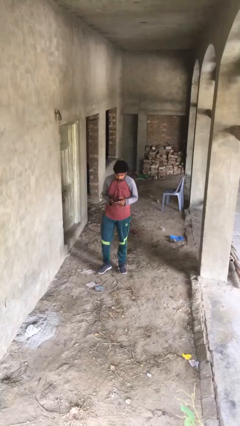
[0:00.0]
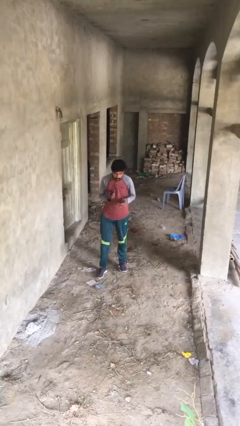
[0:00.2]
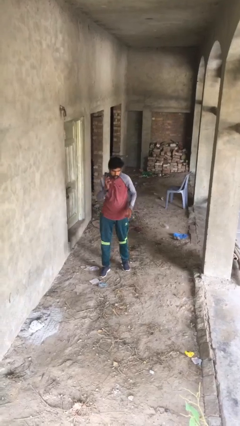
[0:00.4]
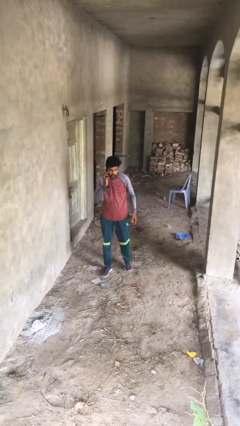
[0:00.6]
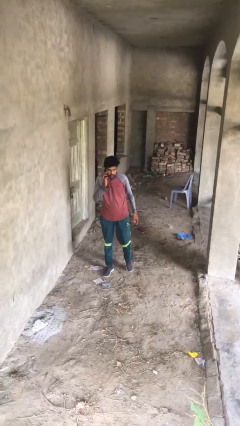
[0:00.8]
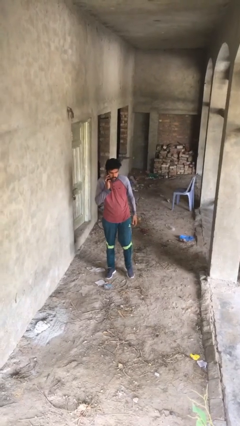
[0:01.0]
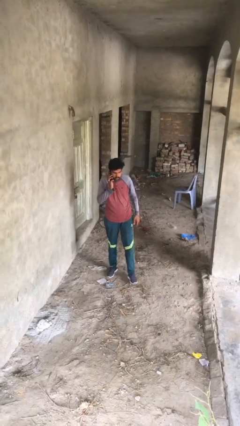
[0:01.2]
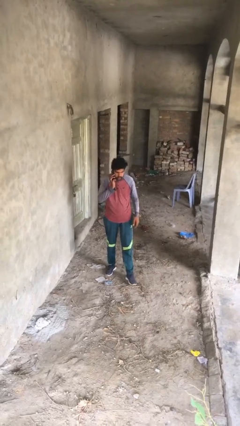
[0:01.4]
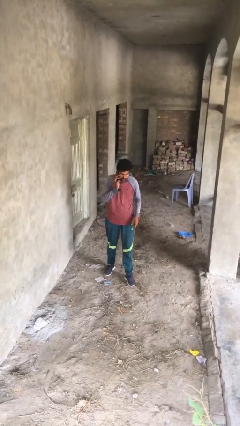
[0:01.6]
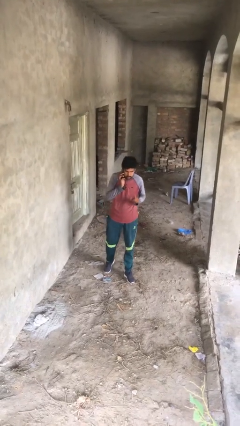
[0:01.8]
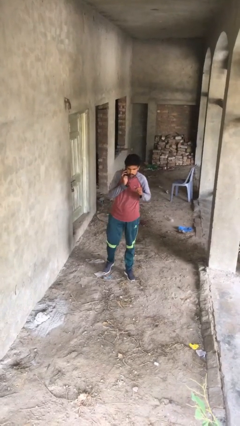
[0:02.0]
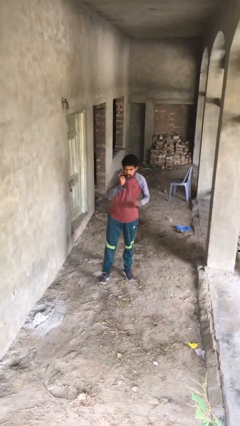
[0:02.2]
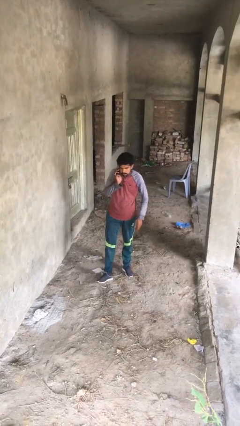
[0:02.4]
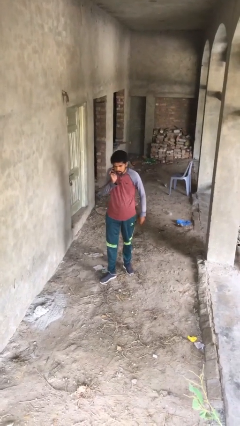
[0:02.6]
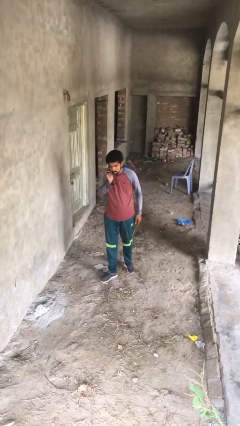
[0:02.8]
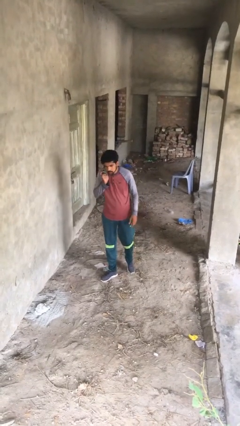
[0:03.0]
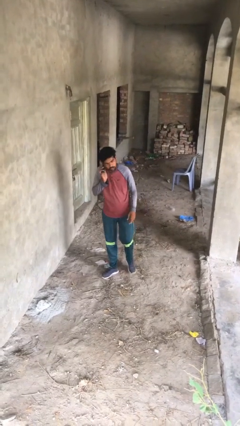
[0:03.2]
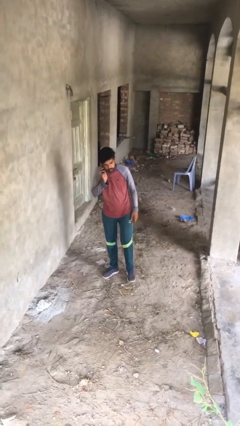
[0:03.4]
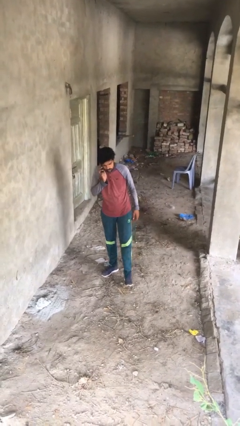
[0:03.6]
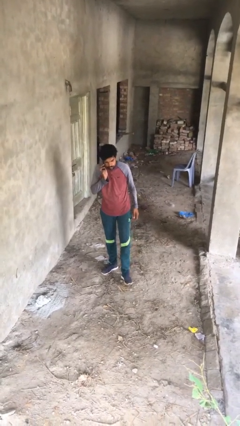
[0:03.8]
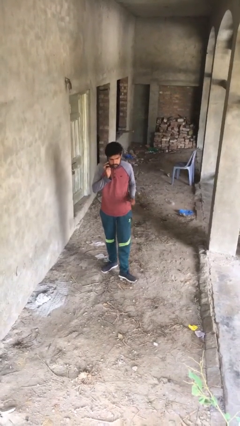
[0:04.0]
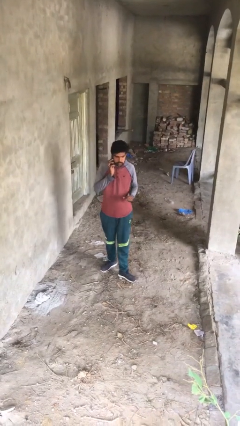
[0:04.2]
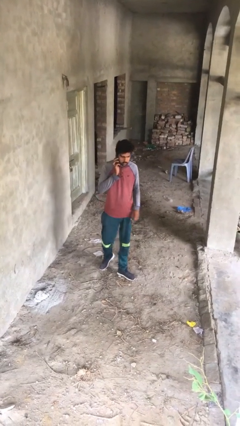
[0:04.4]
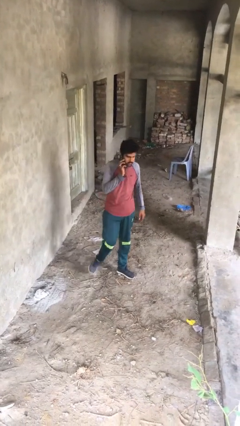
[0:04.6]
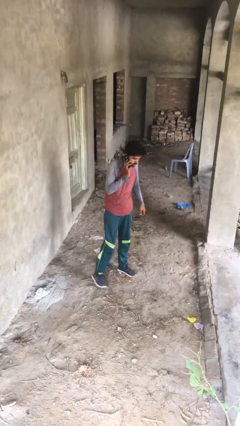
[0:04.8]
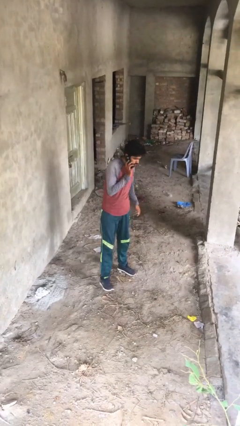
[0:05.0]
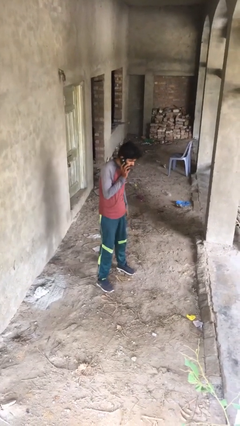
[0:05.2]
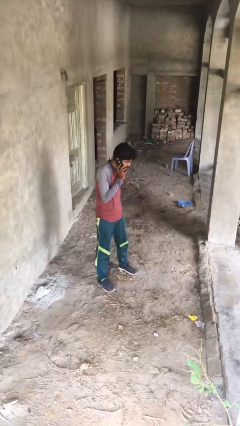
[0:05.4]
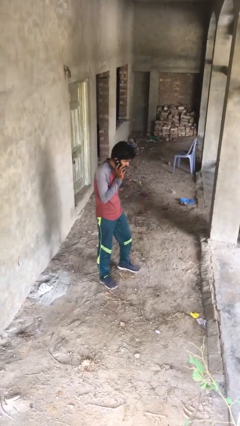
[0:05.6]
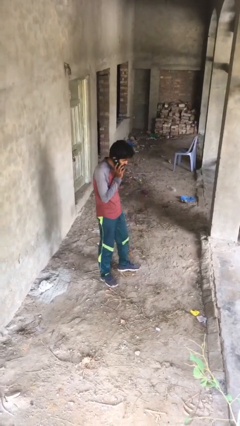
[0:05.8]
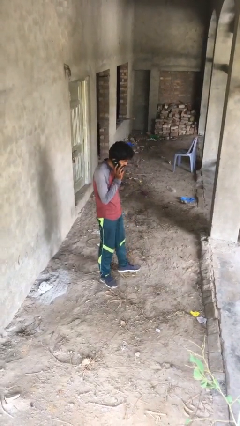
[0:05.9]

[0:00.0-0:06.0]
person talks on phone

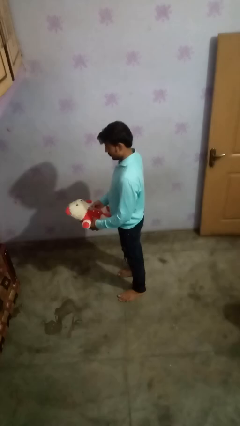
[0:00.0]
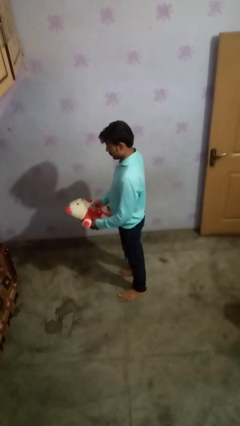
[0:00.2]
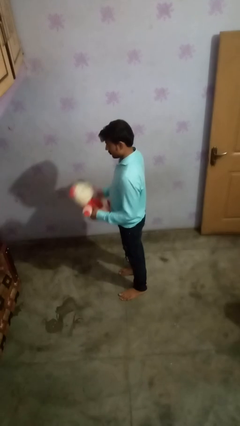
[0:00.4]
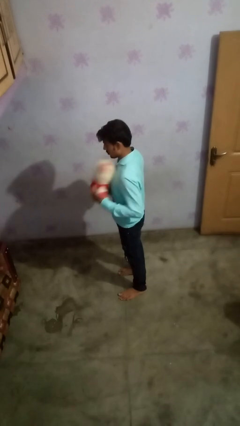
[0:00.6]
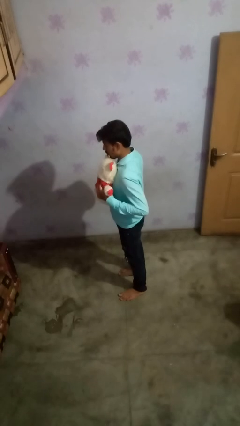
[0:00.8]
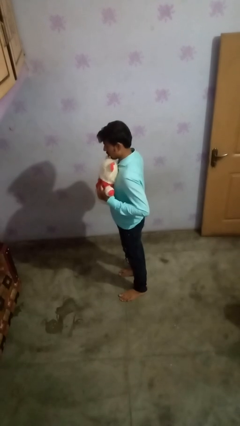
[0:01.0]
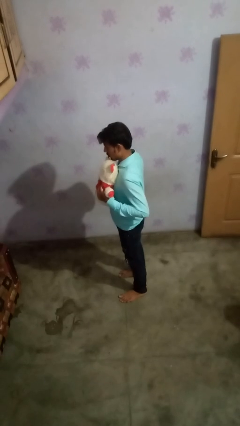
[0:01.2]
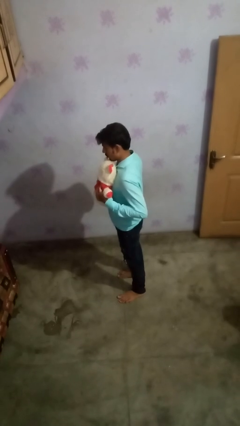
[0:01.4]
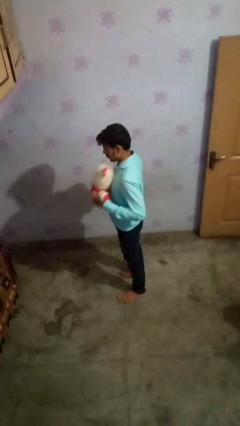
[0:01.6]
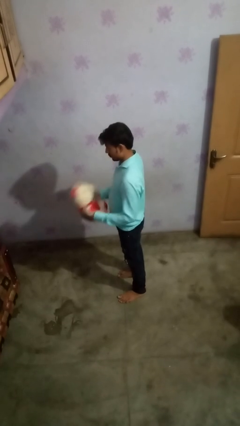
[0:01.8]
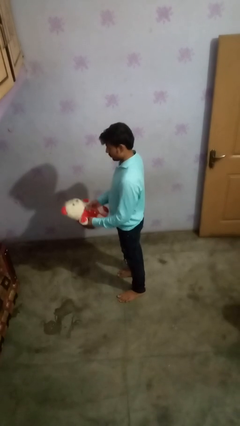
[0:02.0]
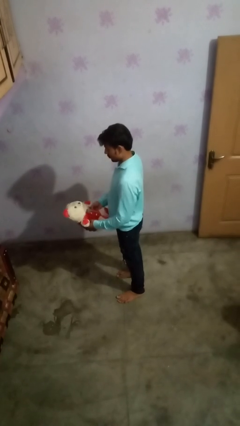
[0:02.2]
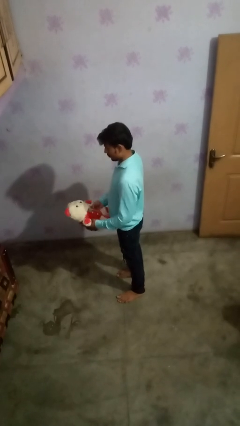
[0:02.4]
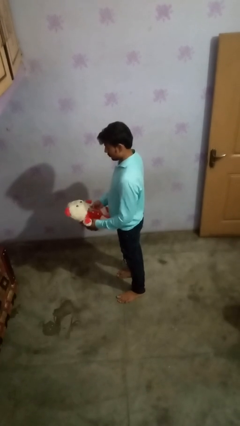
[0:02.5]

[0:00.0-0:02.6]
person hugs stuffed animal

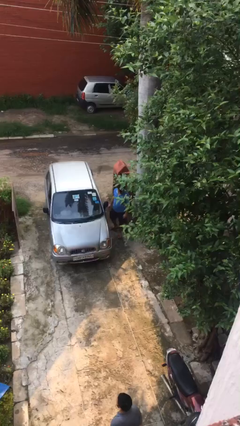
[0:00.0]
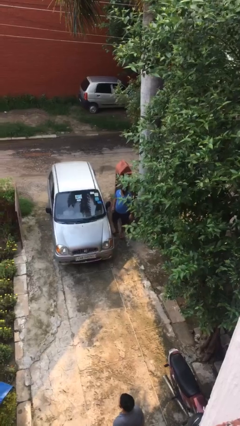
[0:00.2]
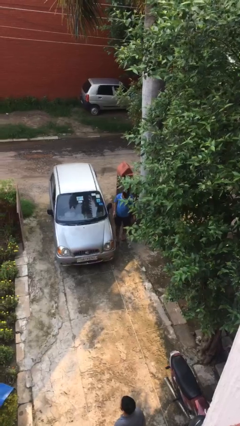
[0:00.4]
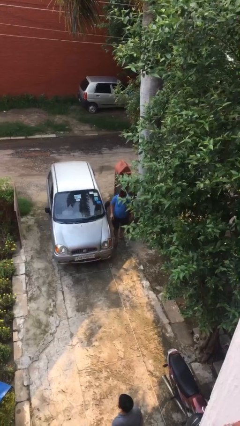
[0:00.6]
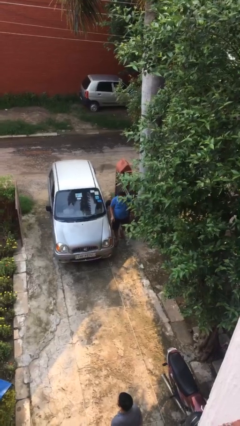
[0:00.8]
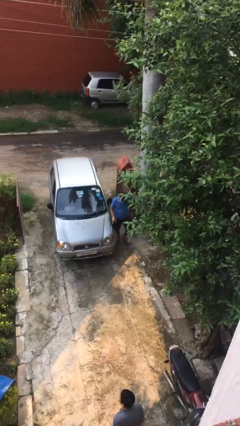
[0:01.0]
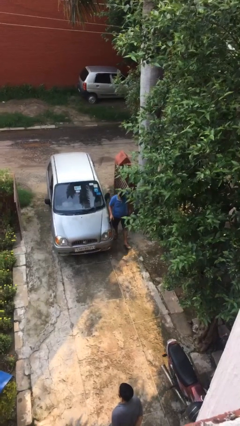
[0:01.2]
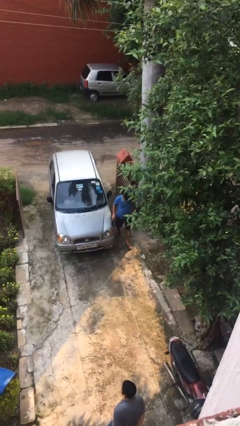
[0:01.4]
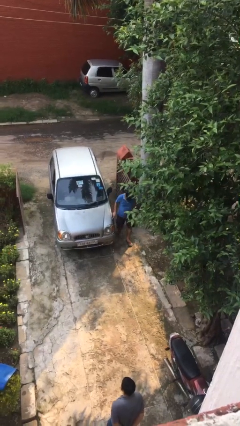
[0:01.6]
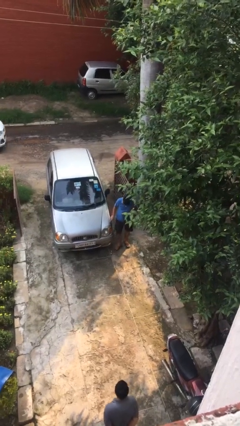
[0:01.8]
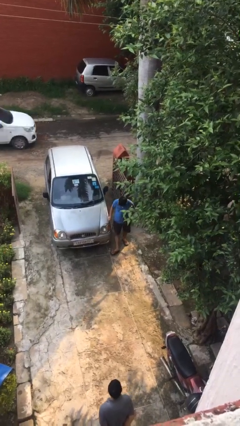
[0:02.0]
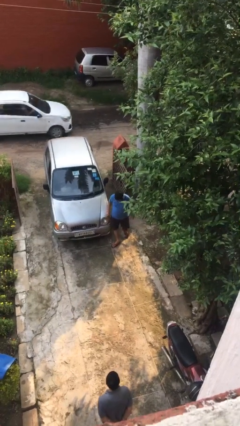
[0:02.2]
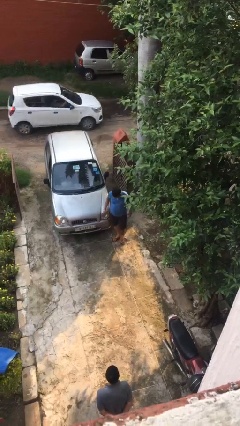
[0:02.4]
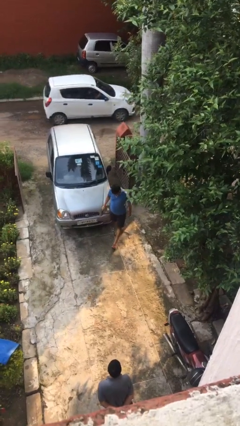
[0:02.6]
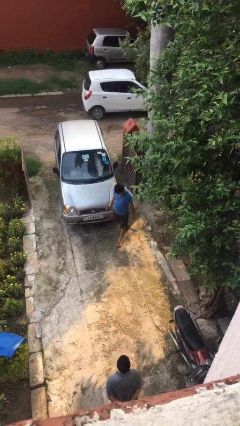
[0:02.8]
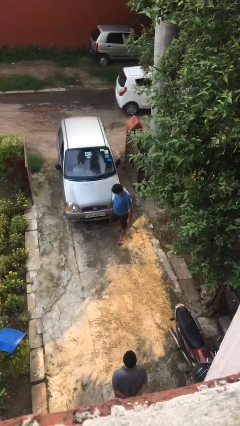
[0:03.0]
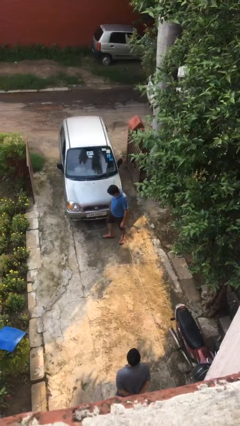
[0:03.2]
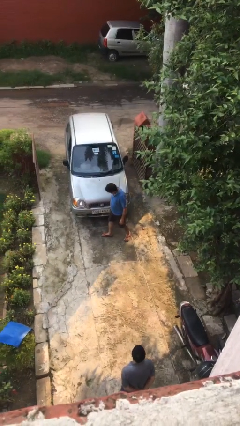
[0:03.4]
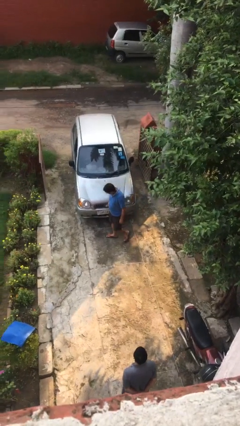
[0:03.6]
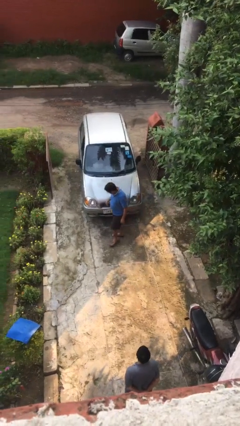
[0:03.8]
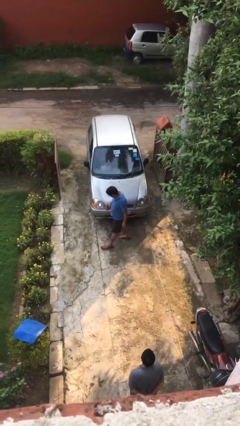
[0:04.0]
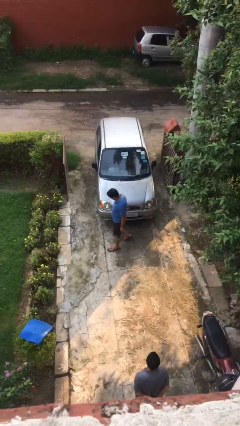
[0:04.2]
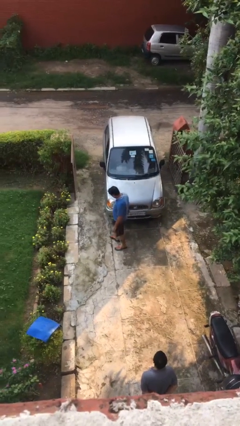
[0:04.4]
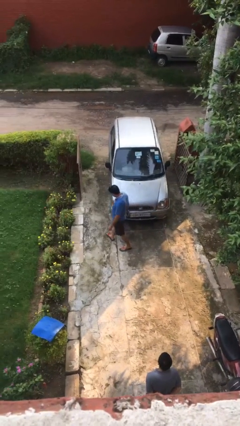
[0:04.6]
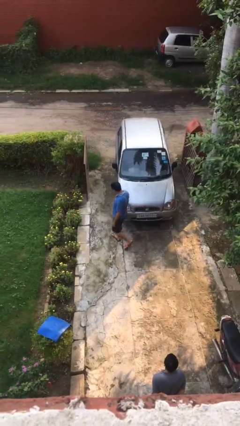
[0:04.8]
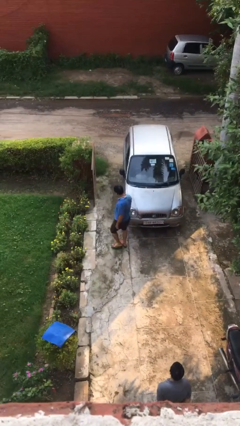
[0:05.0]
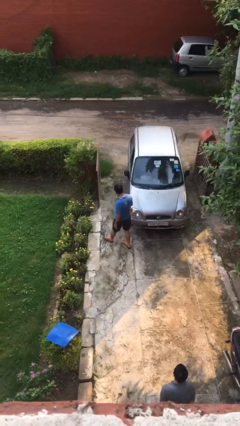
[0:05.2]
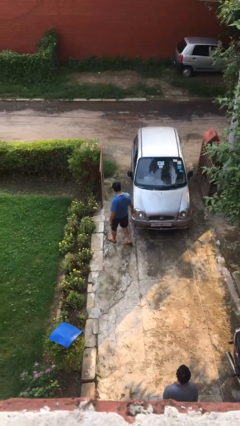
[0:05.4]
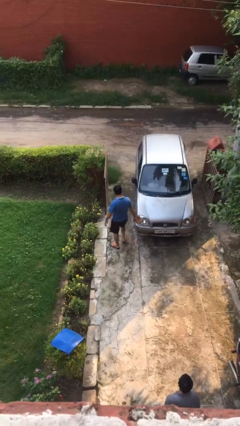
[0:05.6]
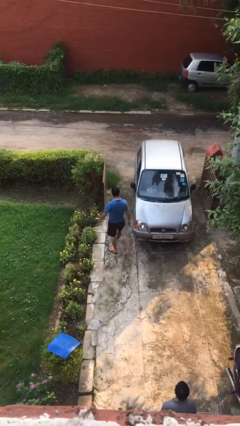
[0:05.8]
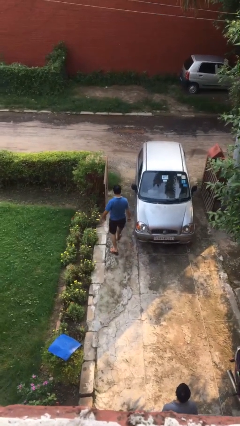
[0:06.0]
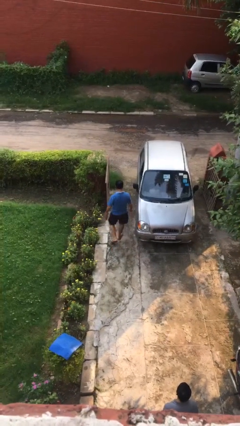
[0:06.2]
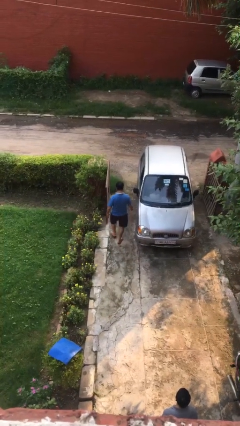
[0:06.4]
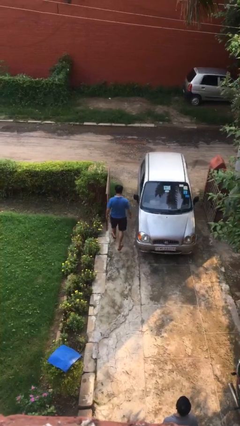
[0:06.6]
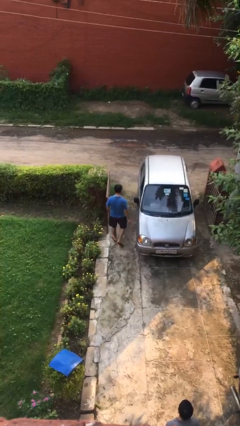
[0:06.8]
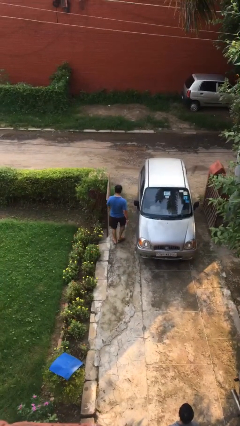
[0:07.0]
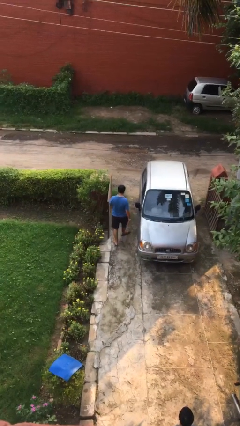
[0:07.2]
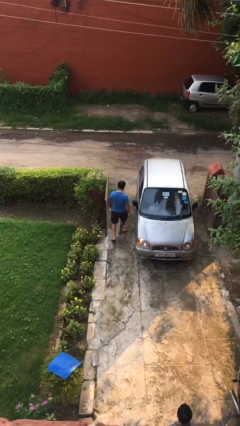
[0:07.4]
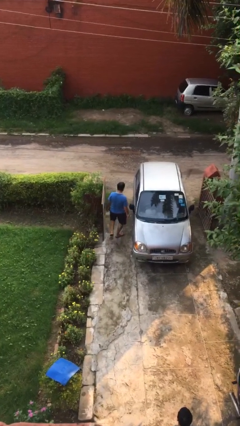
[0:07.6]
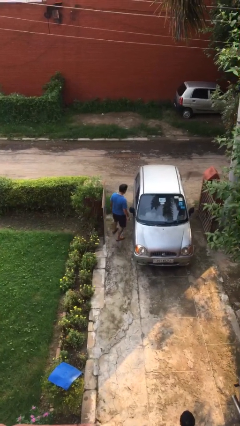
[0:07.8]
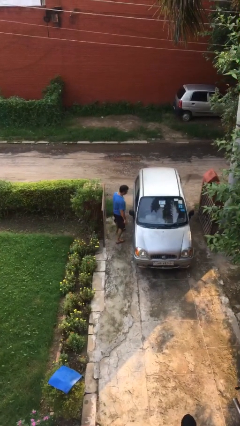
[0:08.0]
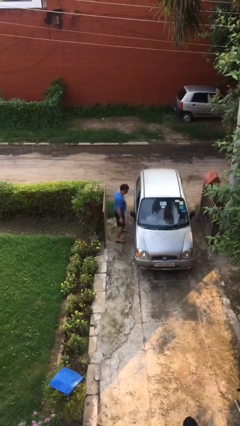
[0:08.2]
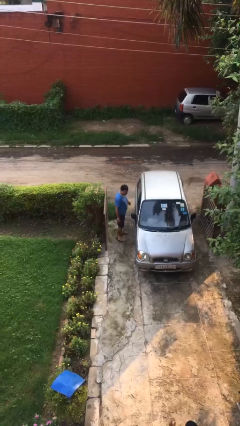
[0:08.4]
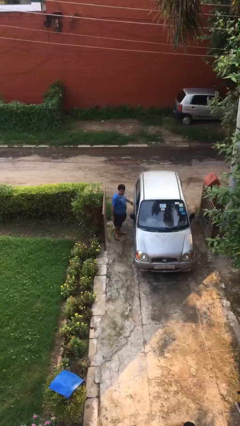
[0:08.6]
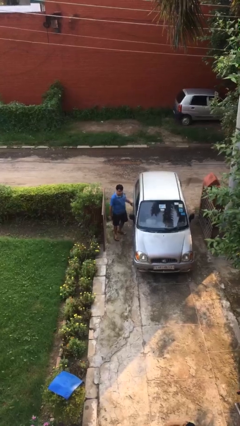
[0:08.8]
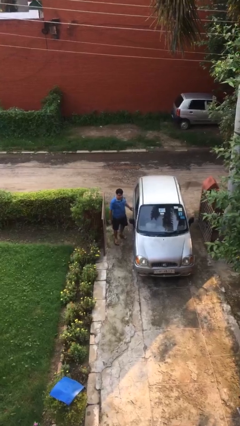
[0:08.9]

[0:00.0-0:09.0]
person walks around car
